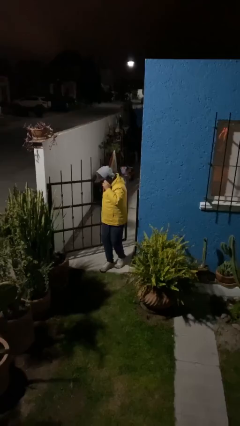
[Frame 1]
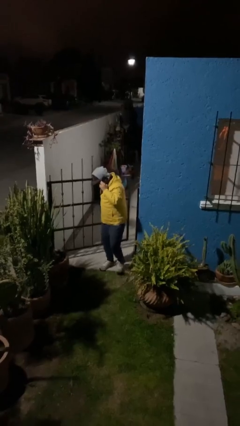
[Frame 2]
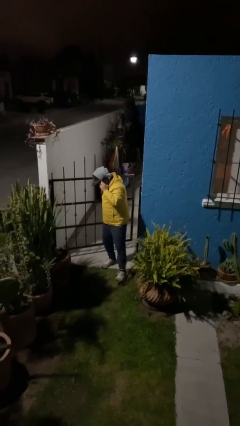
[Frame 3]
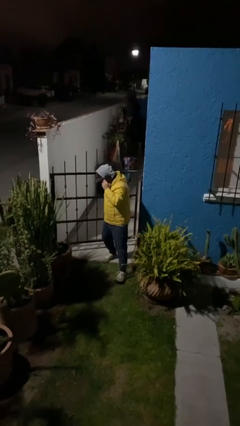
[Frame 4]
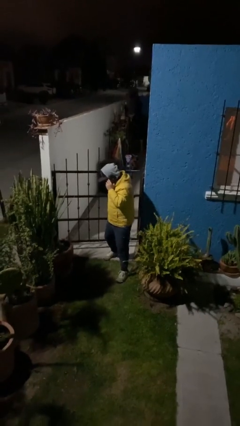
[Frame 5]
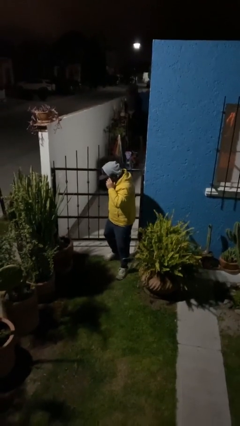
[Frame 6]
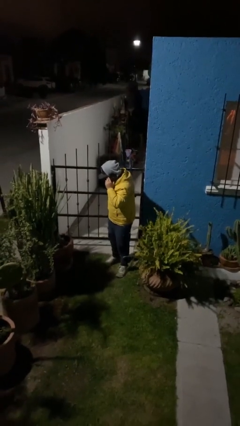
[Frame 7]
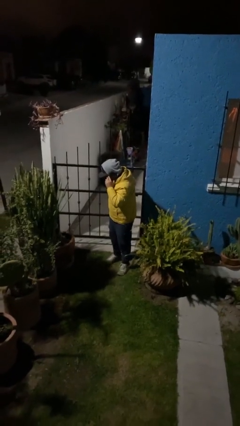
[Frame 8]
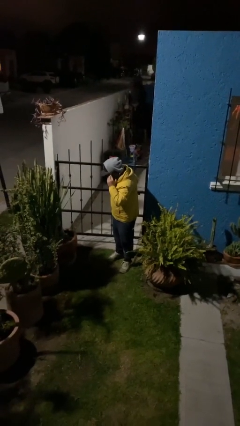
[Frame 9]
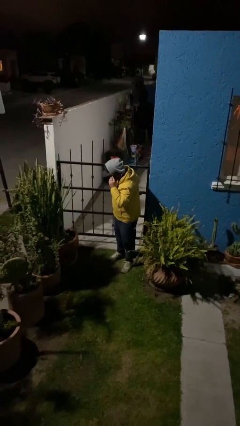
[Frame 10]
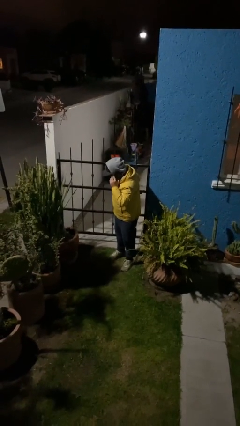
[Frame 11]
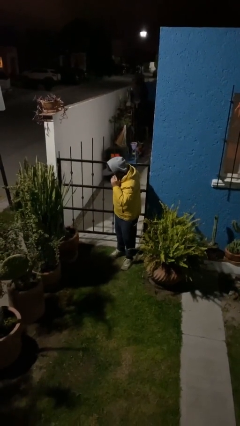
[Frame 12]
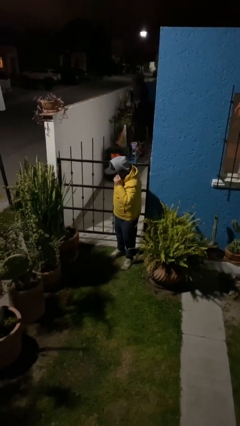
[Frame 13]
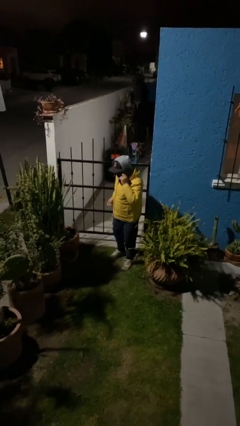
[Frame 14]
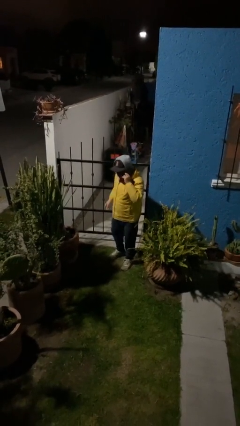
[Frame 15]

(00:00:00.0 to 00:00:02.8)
person closes facility door

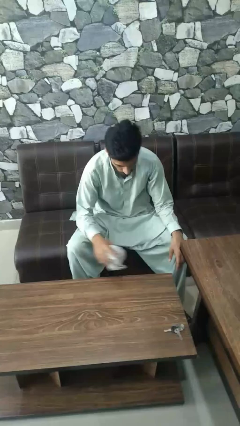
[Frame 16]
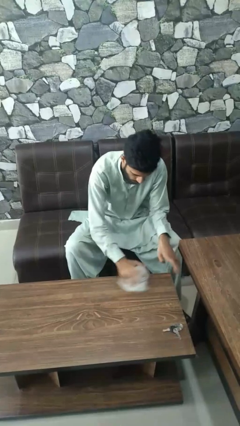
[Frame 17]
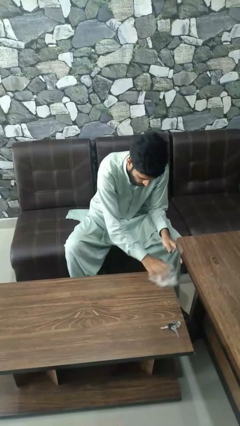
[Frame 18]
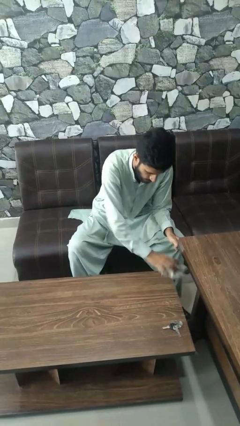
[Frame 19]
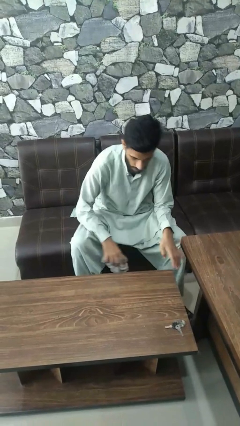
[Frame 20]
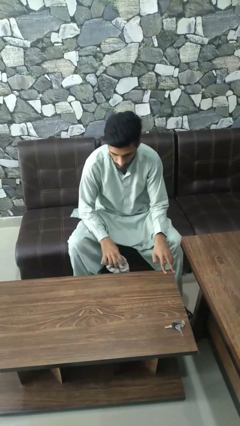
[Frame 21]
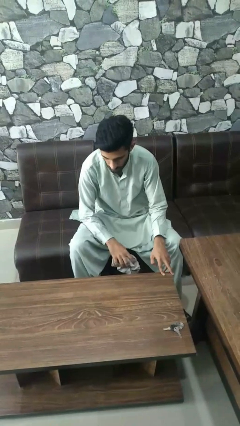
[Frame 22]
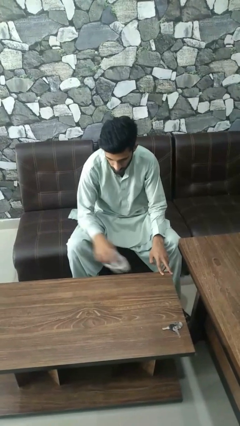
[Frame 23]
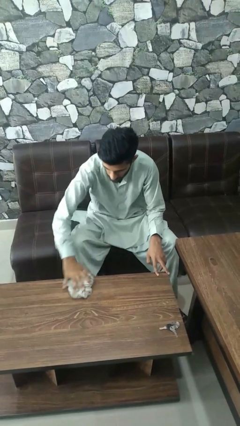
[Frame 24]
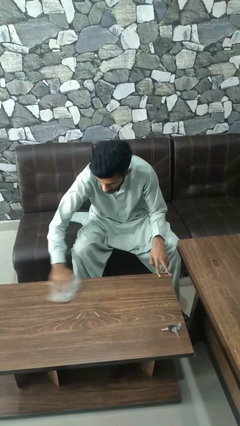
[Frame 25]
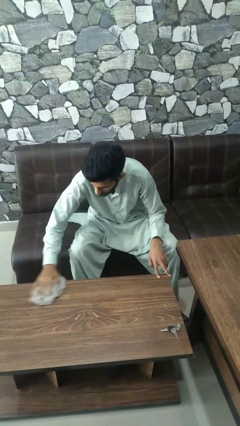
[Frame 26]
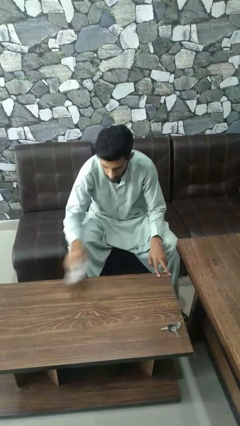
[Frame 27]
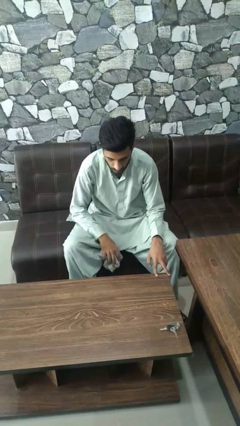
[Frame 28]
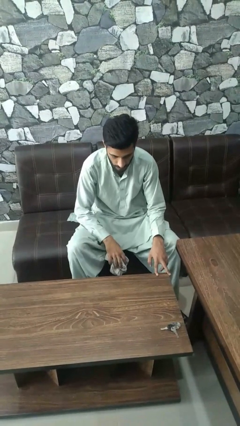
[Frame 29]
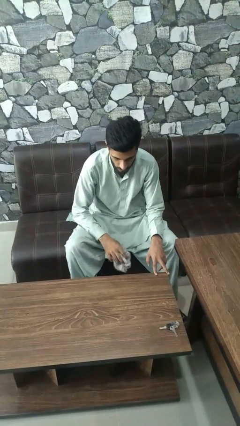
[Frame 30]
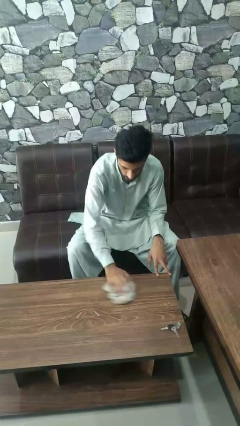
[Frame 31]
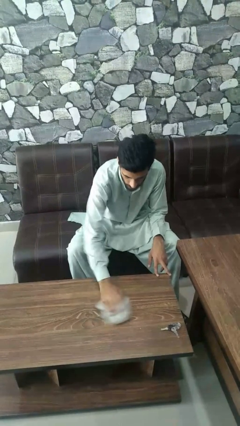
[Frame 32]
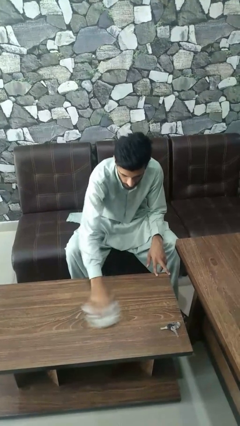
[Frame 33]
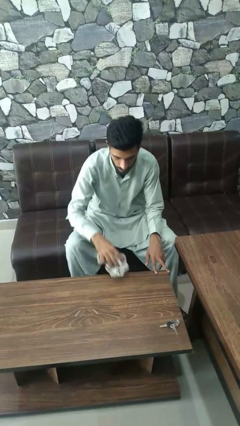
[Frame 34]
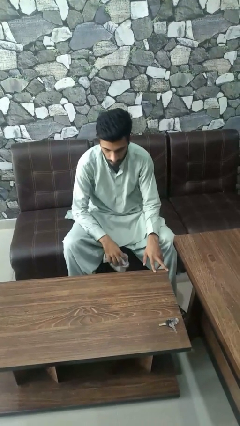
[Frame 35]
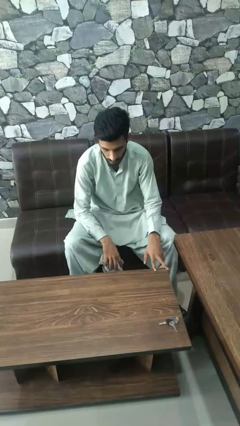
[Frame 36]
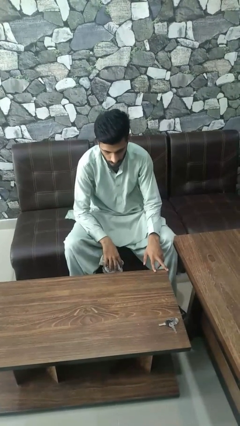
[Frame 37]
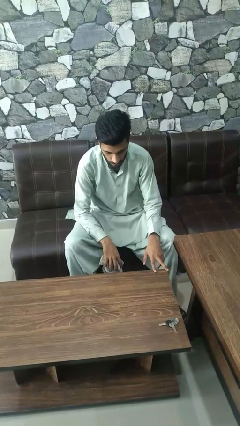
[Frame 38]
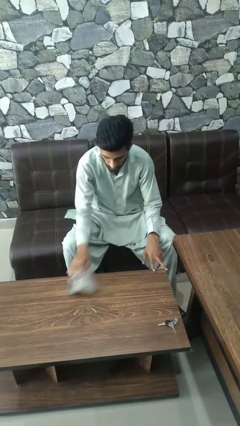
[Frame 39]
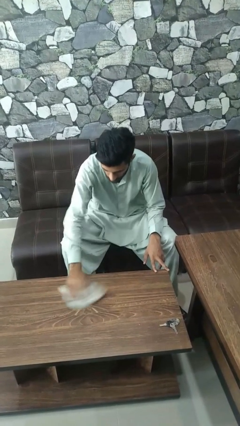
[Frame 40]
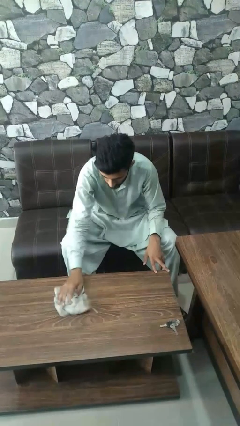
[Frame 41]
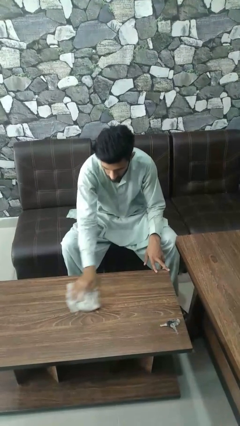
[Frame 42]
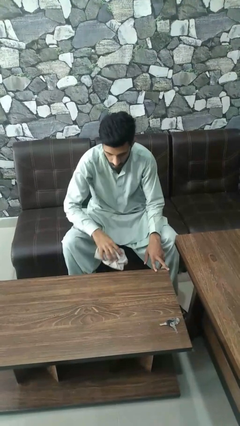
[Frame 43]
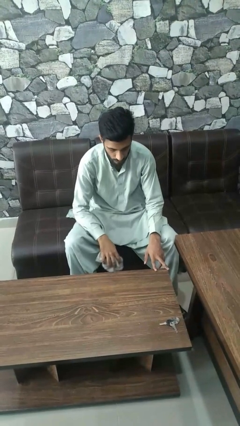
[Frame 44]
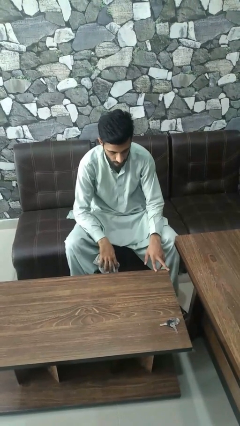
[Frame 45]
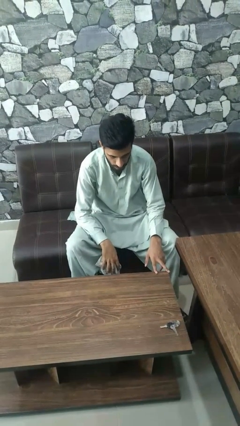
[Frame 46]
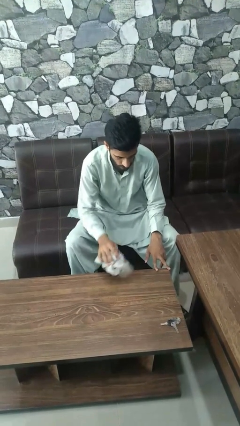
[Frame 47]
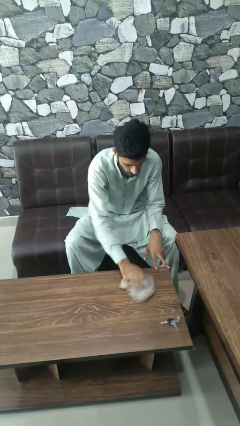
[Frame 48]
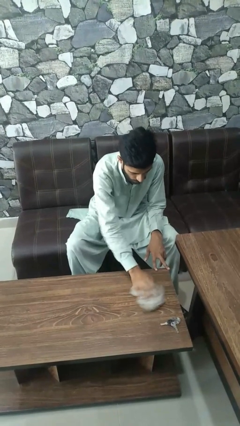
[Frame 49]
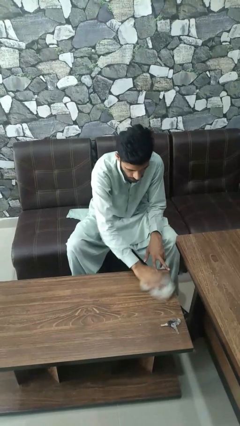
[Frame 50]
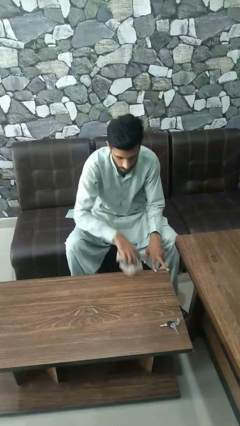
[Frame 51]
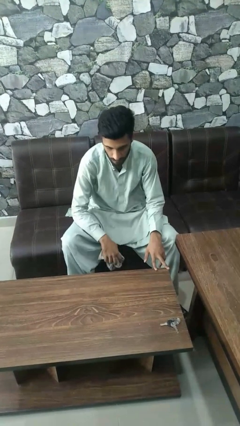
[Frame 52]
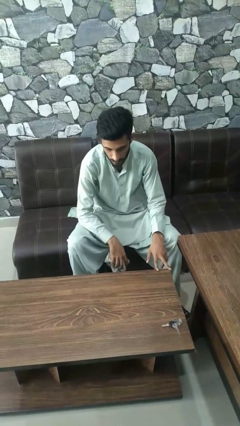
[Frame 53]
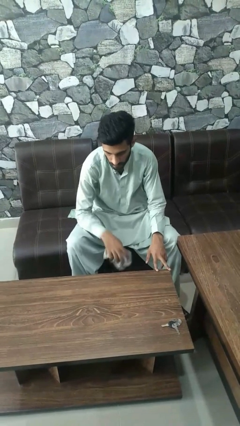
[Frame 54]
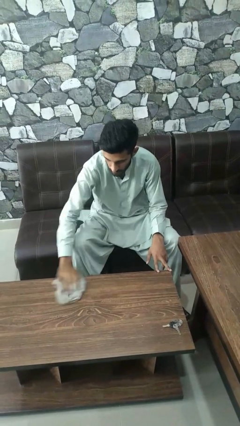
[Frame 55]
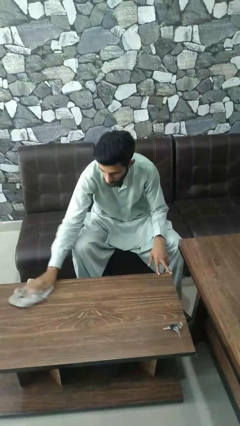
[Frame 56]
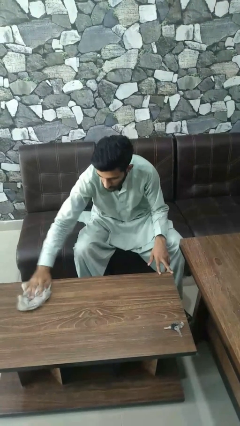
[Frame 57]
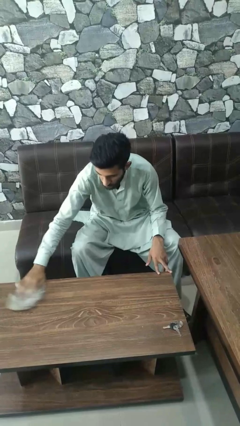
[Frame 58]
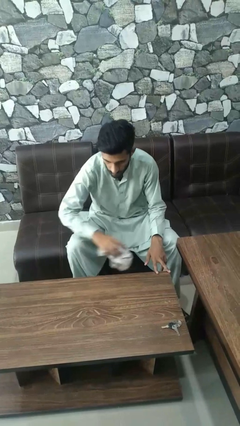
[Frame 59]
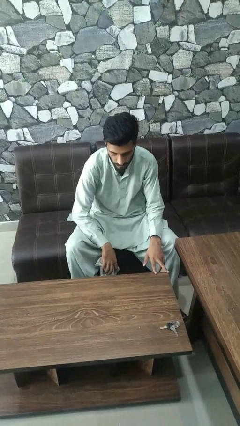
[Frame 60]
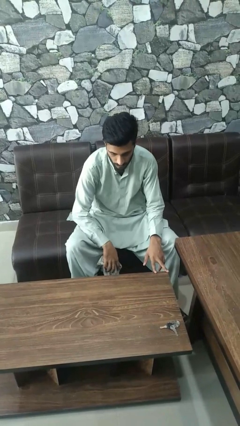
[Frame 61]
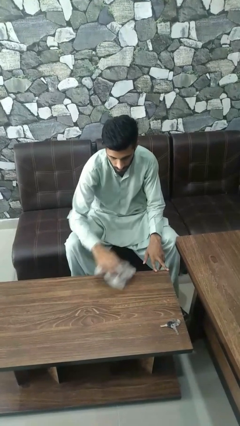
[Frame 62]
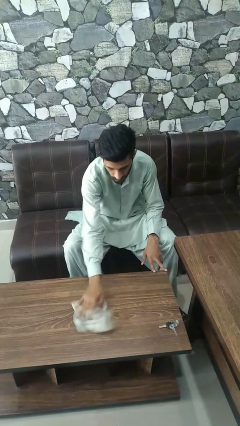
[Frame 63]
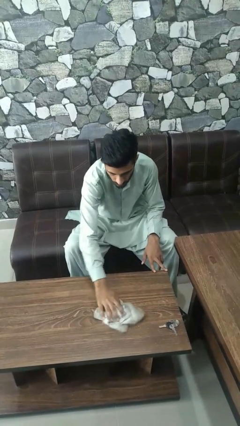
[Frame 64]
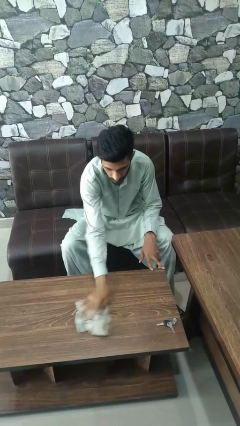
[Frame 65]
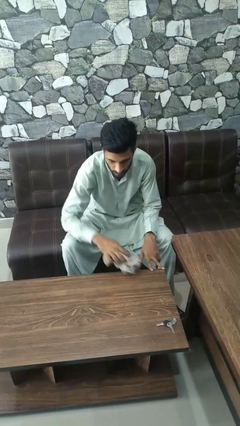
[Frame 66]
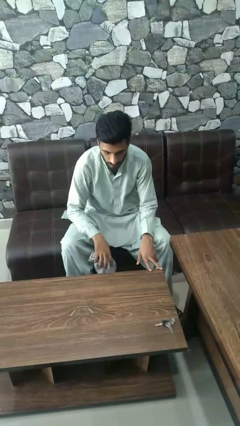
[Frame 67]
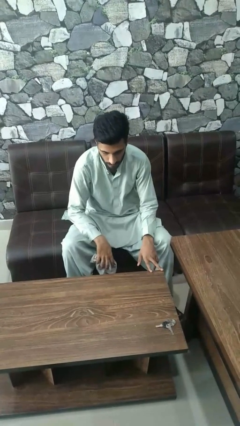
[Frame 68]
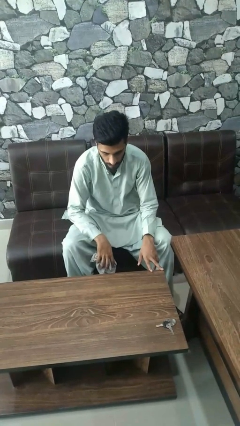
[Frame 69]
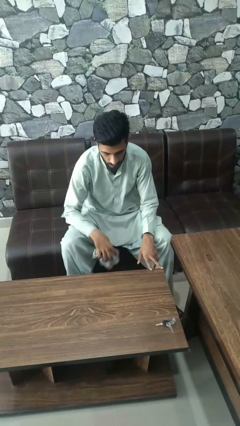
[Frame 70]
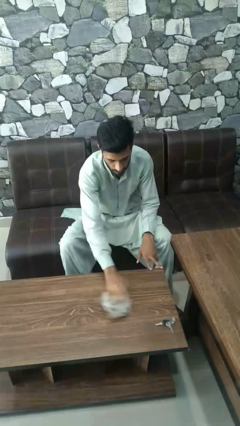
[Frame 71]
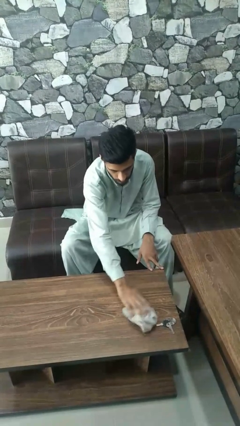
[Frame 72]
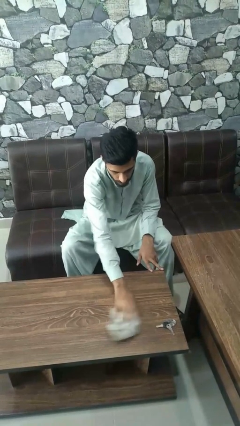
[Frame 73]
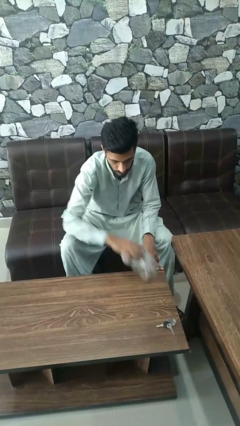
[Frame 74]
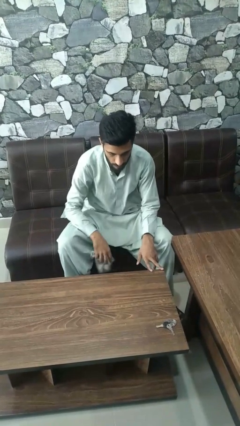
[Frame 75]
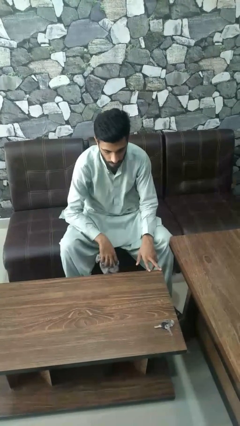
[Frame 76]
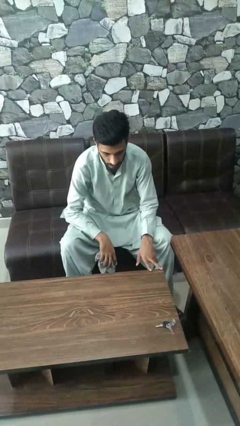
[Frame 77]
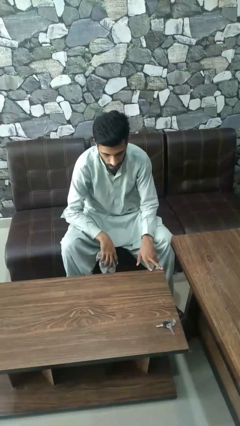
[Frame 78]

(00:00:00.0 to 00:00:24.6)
person cleans table with rag

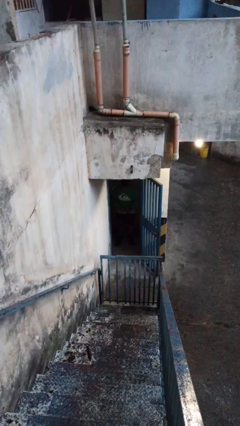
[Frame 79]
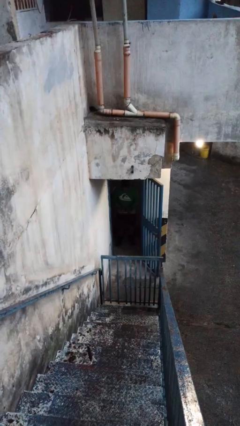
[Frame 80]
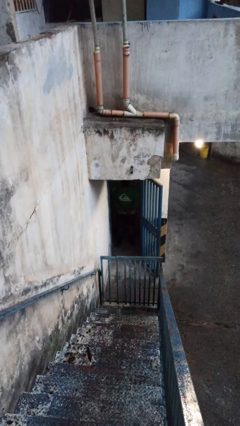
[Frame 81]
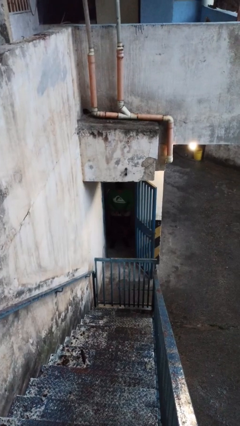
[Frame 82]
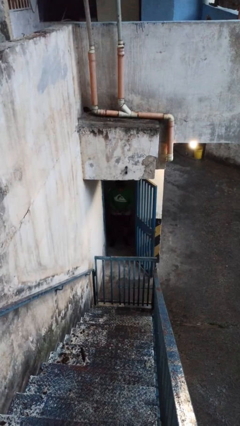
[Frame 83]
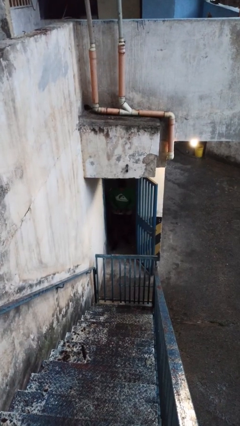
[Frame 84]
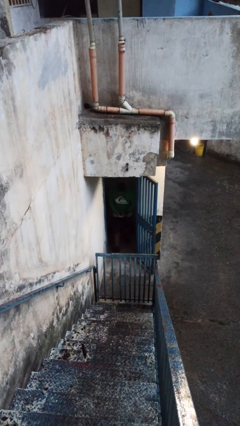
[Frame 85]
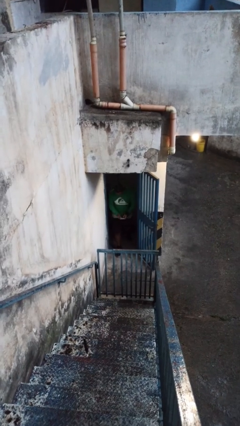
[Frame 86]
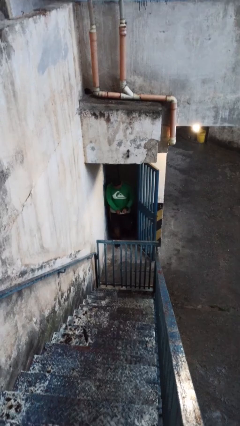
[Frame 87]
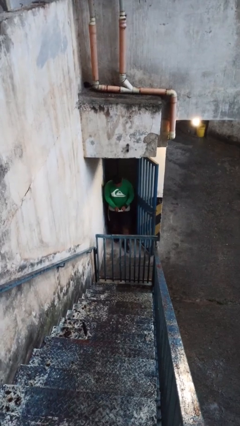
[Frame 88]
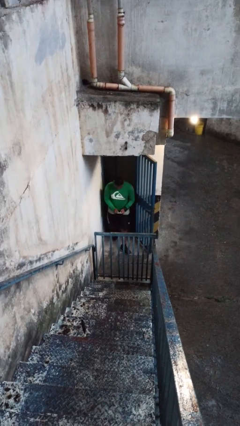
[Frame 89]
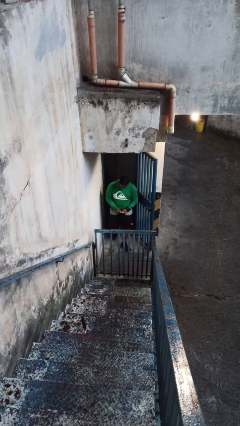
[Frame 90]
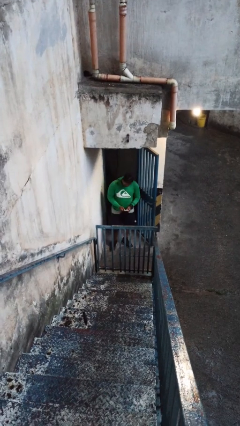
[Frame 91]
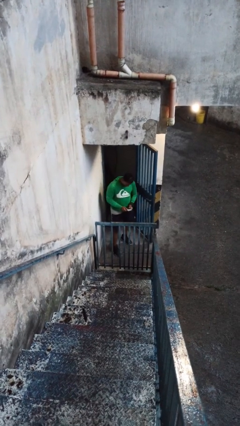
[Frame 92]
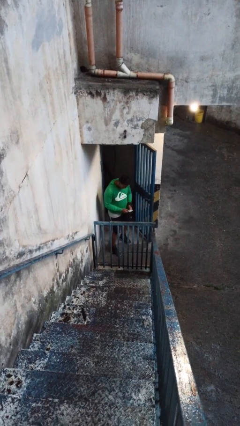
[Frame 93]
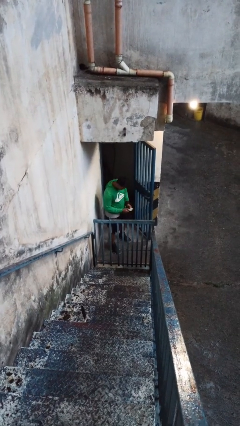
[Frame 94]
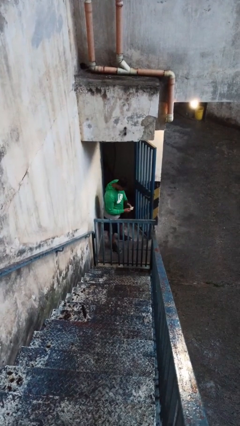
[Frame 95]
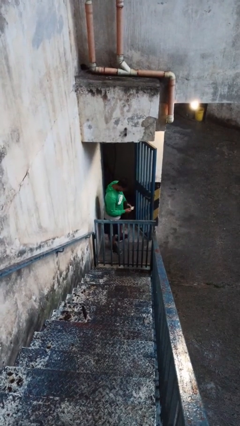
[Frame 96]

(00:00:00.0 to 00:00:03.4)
person enters scene through structure
